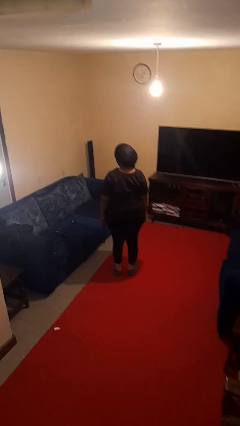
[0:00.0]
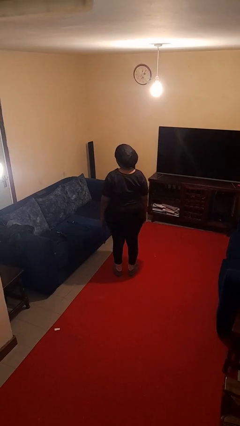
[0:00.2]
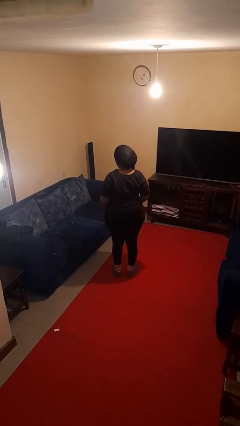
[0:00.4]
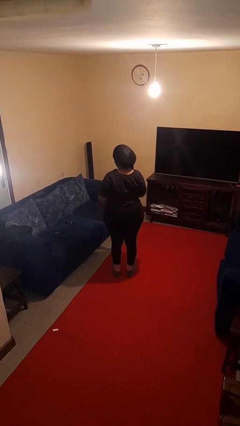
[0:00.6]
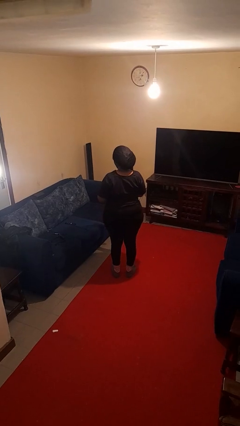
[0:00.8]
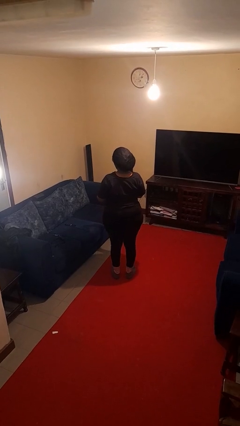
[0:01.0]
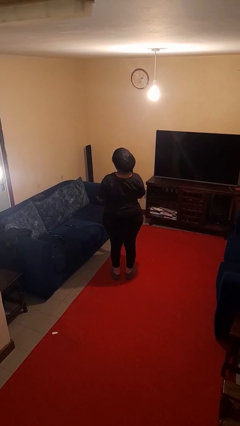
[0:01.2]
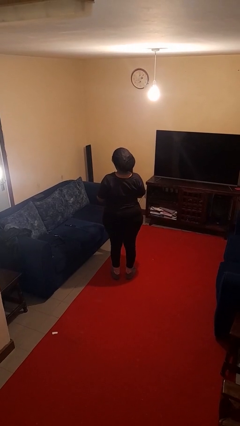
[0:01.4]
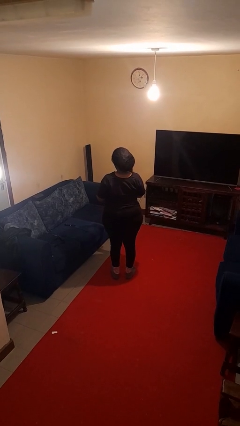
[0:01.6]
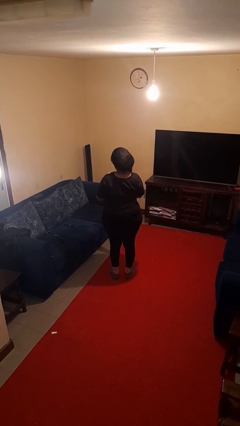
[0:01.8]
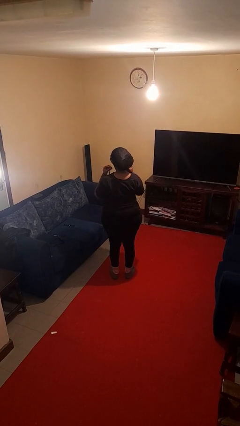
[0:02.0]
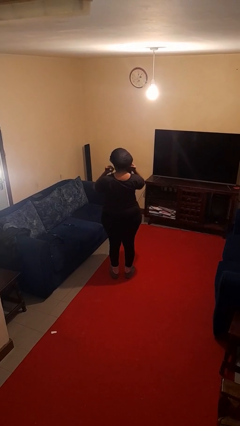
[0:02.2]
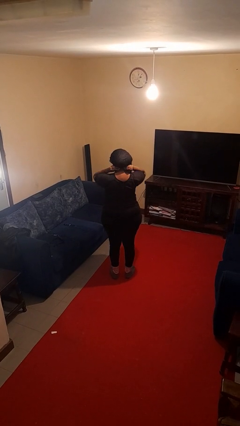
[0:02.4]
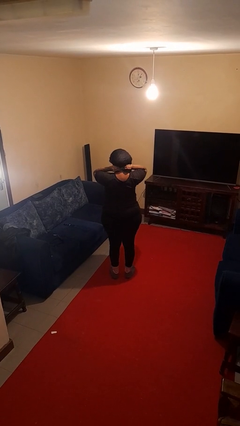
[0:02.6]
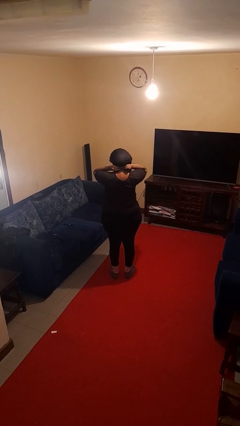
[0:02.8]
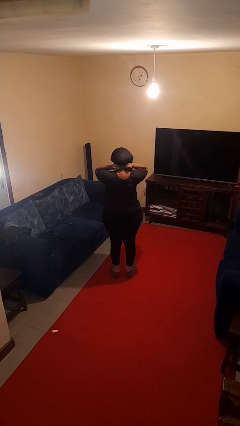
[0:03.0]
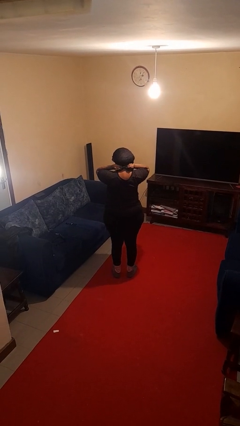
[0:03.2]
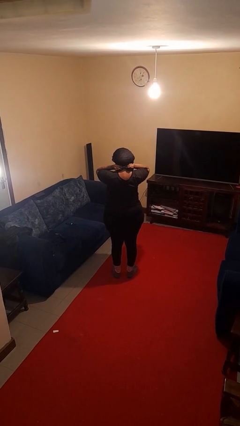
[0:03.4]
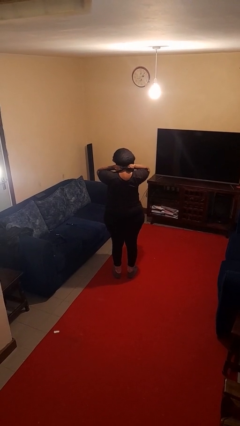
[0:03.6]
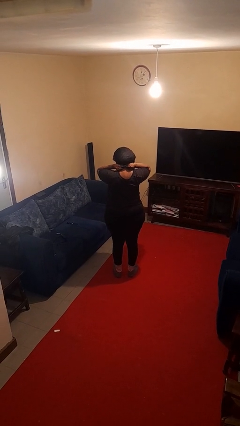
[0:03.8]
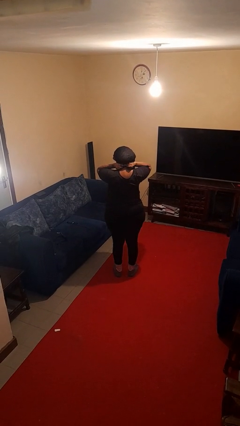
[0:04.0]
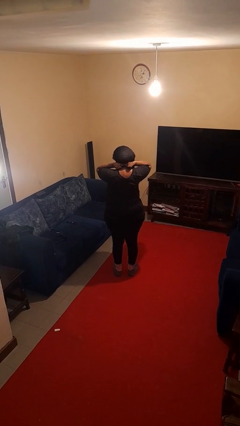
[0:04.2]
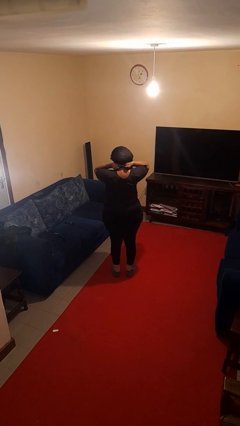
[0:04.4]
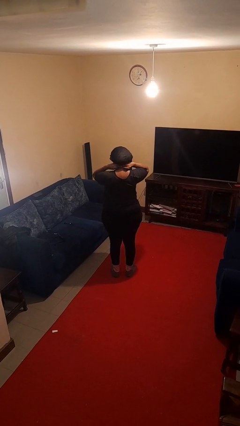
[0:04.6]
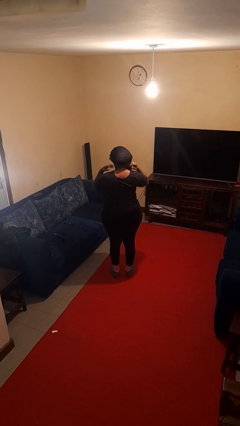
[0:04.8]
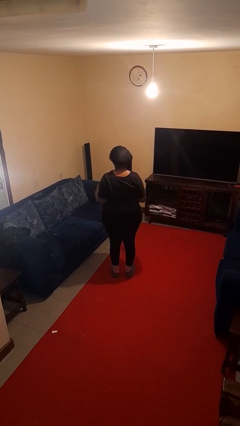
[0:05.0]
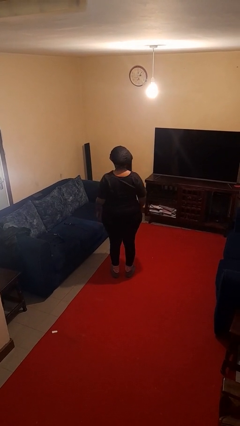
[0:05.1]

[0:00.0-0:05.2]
person puts on necklace

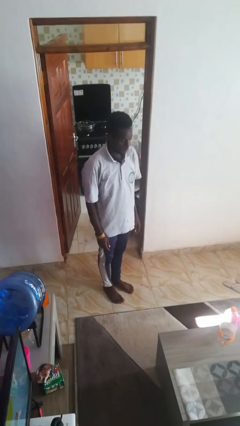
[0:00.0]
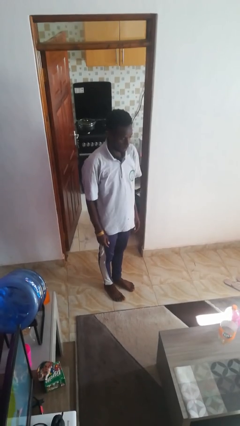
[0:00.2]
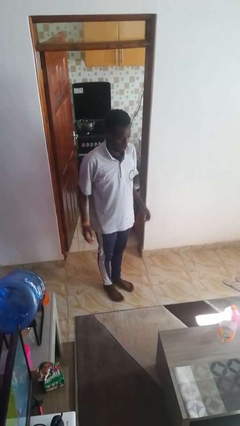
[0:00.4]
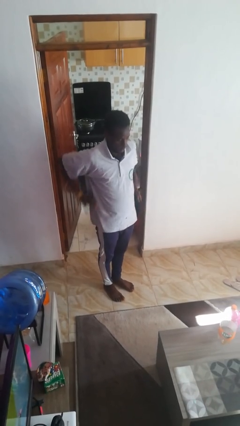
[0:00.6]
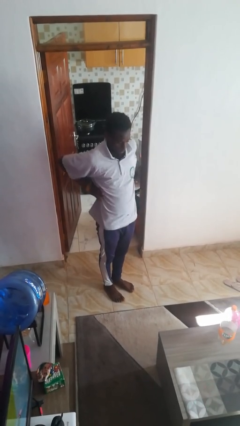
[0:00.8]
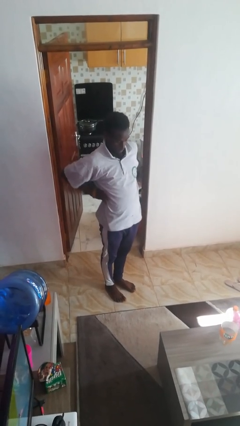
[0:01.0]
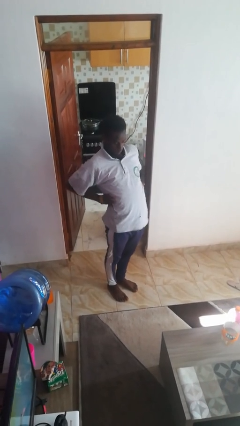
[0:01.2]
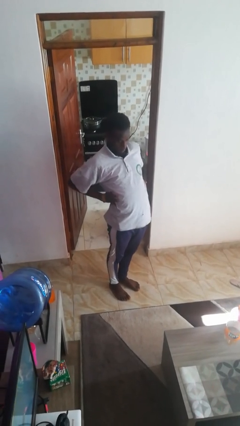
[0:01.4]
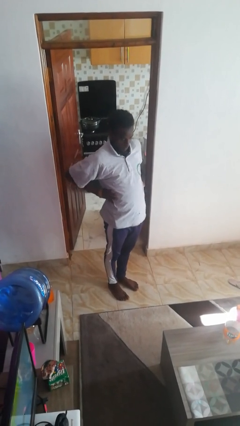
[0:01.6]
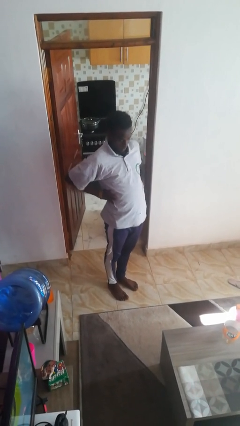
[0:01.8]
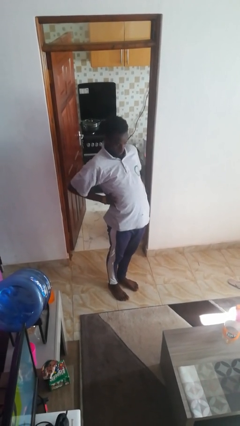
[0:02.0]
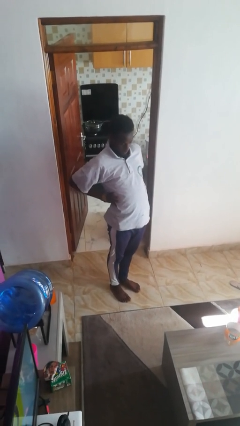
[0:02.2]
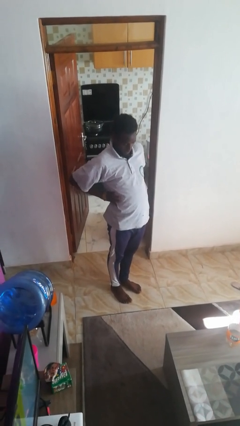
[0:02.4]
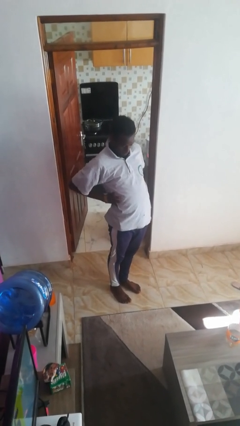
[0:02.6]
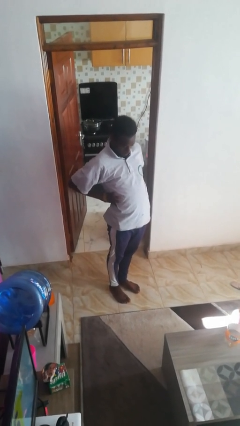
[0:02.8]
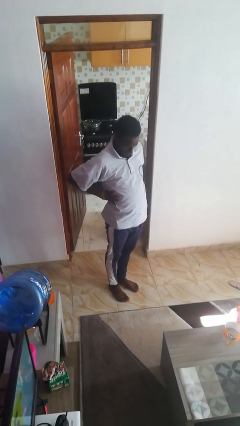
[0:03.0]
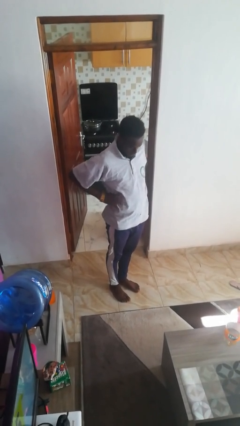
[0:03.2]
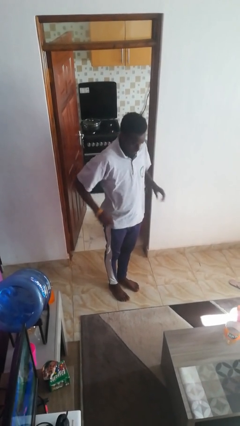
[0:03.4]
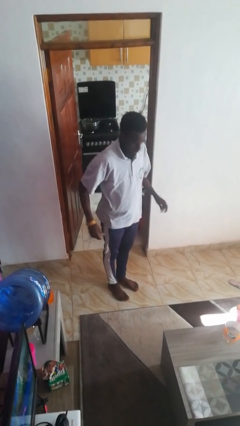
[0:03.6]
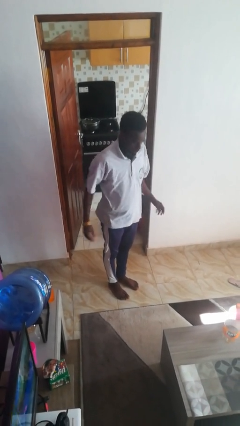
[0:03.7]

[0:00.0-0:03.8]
person stretches back

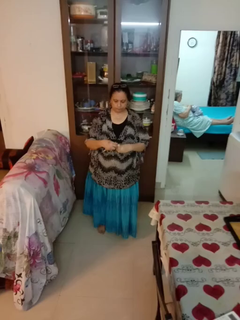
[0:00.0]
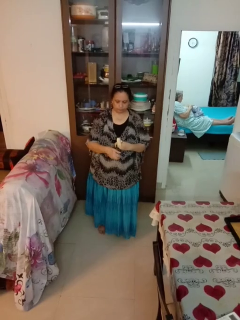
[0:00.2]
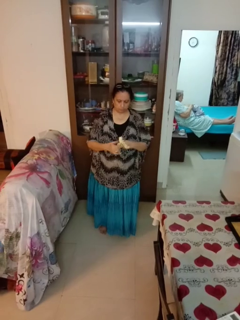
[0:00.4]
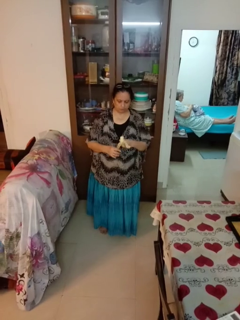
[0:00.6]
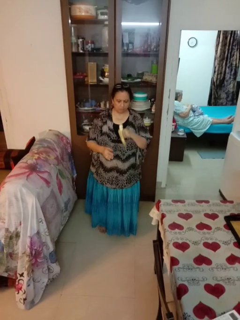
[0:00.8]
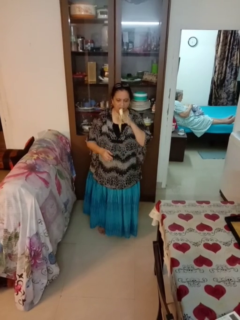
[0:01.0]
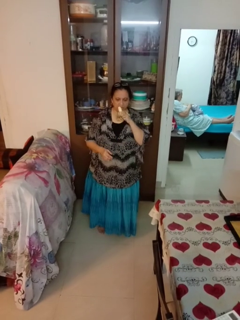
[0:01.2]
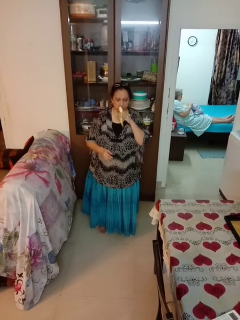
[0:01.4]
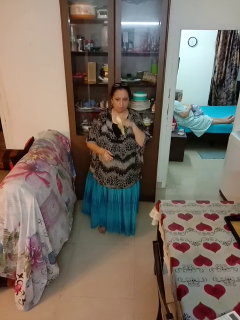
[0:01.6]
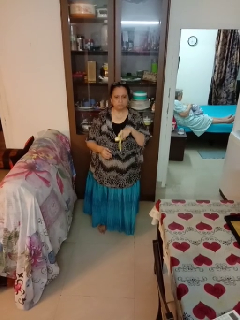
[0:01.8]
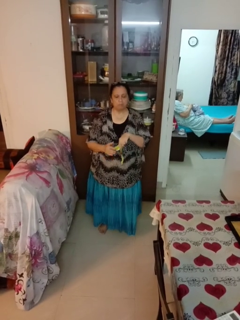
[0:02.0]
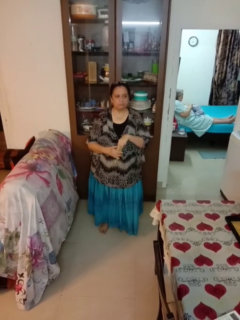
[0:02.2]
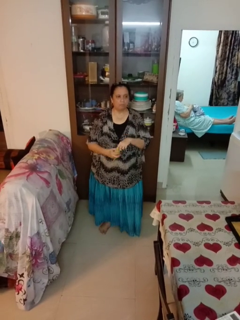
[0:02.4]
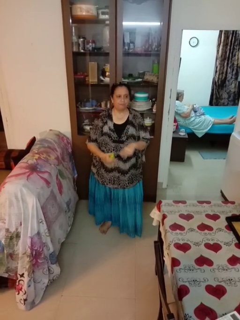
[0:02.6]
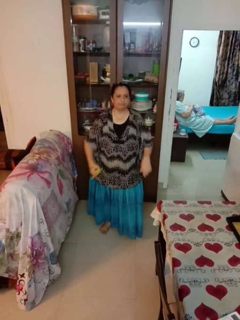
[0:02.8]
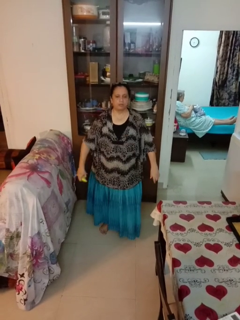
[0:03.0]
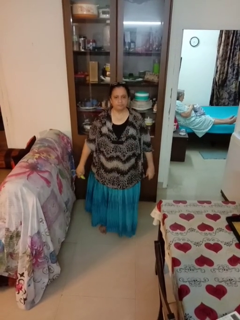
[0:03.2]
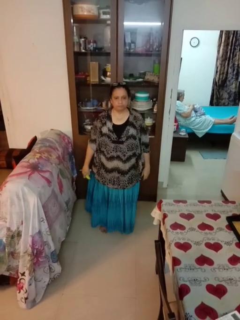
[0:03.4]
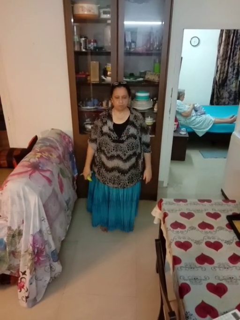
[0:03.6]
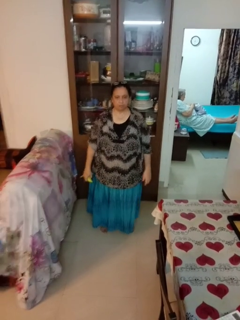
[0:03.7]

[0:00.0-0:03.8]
person eats banana

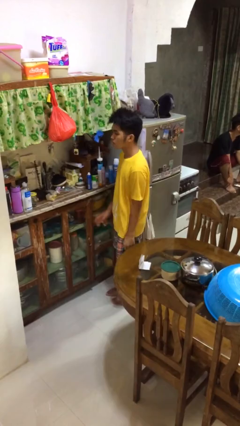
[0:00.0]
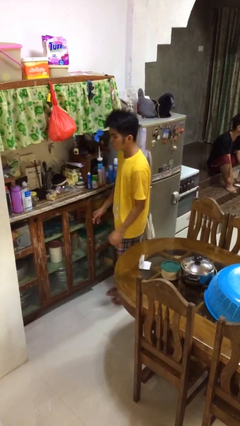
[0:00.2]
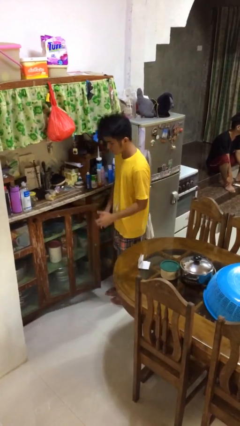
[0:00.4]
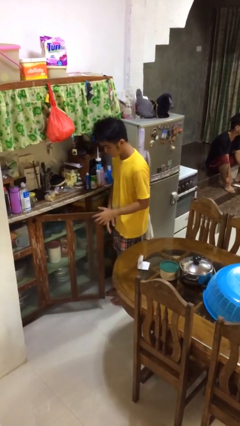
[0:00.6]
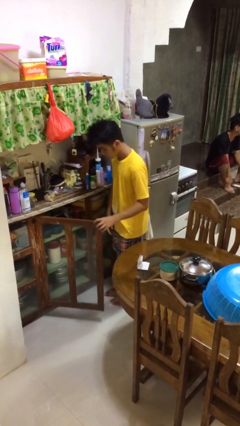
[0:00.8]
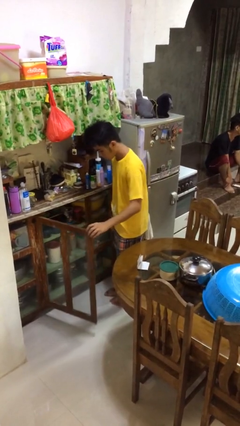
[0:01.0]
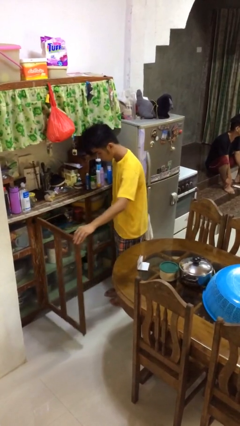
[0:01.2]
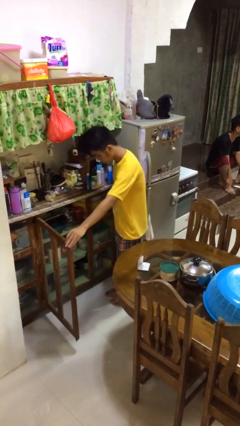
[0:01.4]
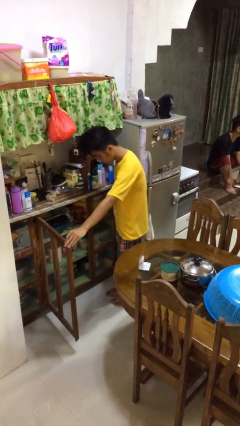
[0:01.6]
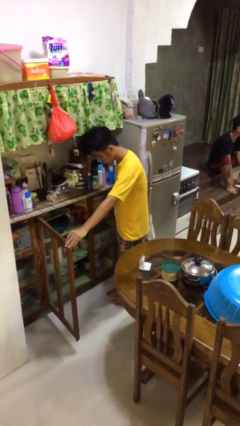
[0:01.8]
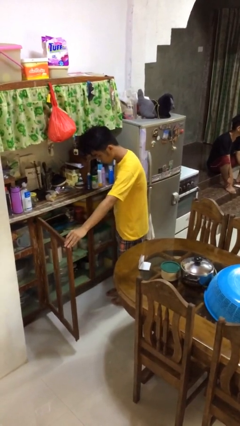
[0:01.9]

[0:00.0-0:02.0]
person opens cabinet

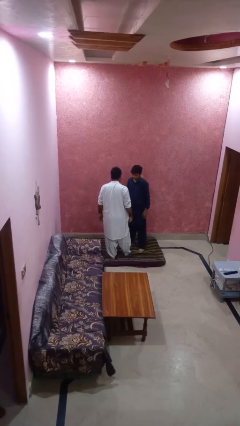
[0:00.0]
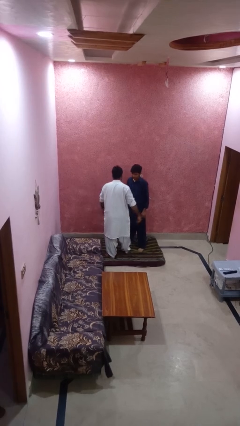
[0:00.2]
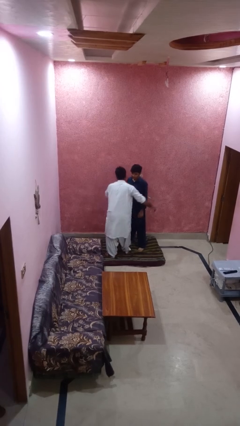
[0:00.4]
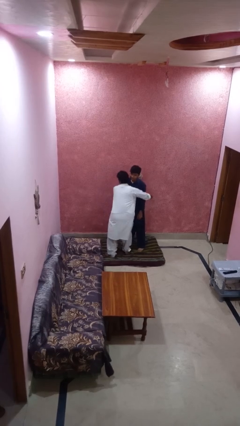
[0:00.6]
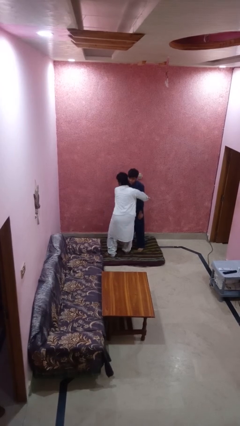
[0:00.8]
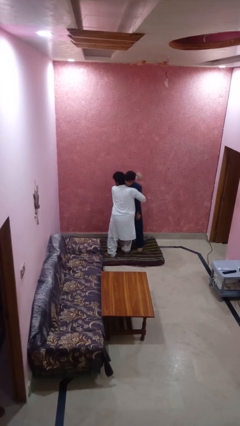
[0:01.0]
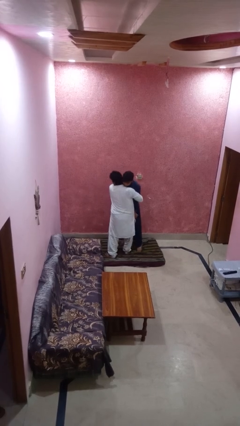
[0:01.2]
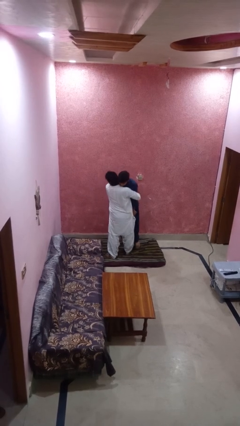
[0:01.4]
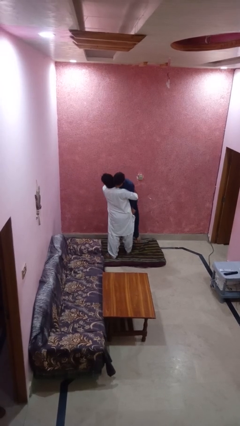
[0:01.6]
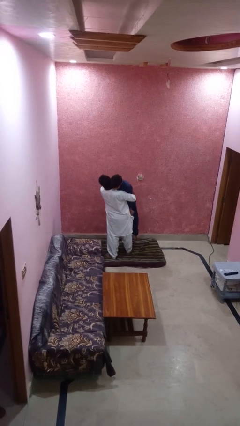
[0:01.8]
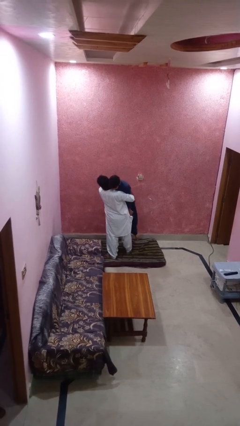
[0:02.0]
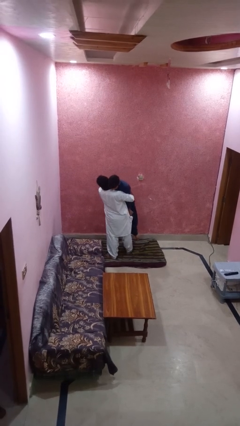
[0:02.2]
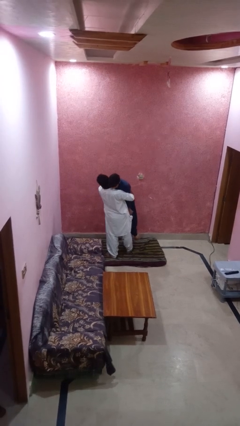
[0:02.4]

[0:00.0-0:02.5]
person picks up person

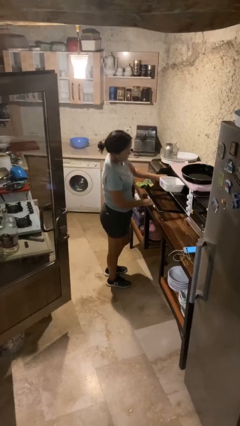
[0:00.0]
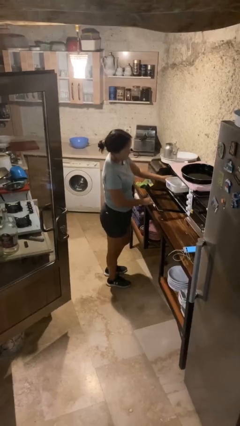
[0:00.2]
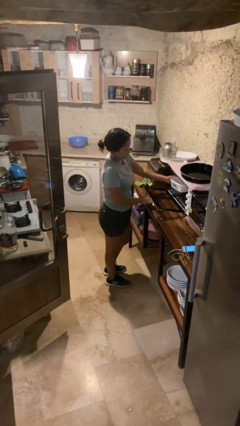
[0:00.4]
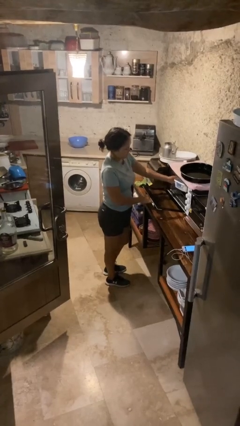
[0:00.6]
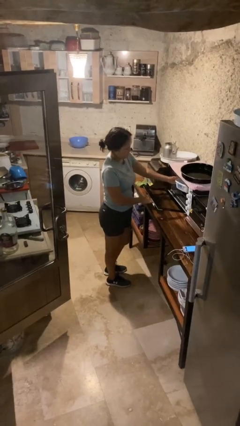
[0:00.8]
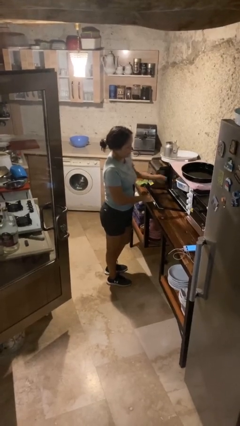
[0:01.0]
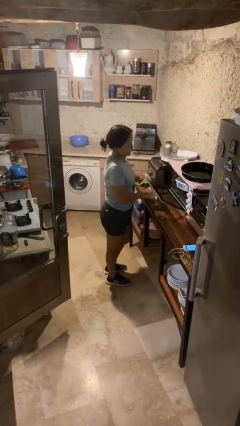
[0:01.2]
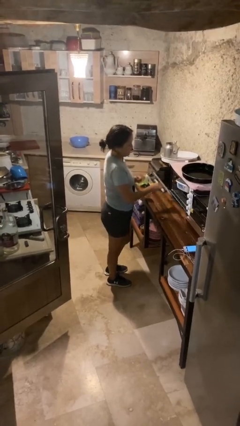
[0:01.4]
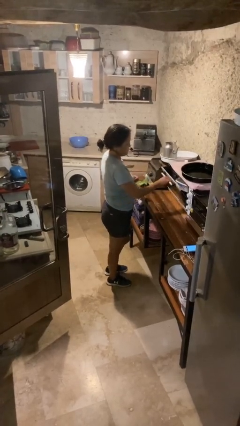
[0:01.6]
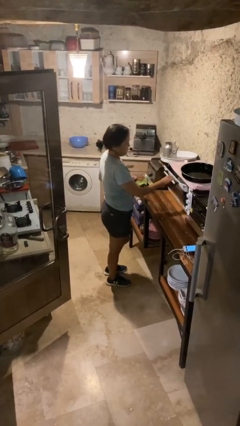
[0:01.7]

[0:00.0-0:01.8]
person puts object into microwave
